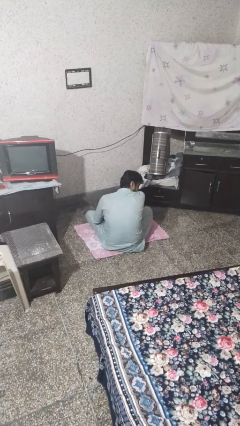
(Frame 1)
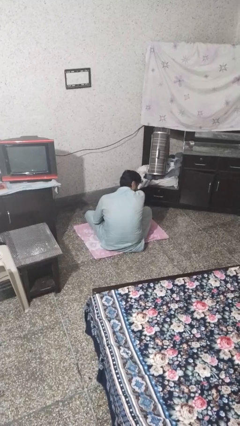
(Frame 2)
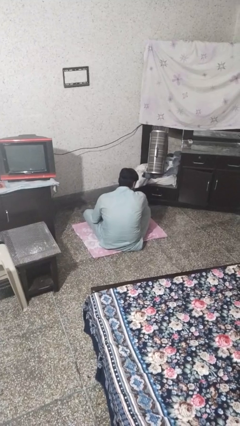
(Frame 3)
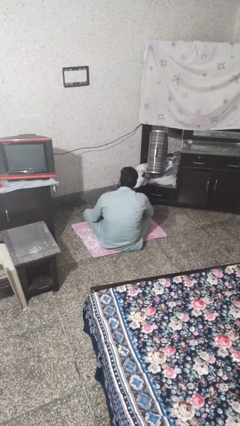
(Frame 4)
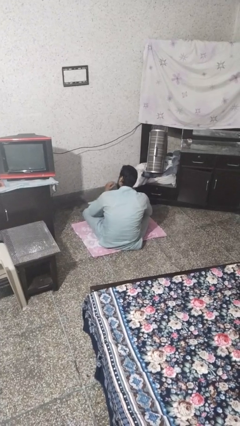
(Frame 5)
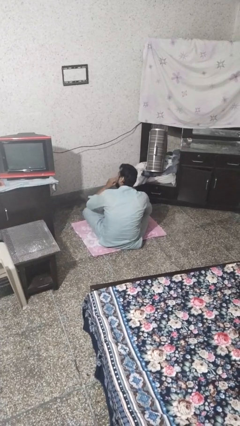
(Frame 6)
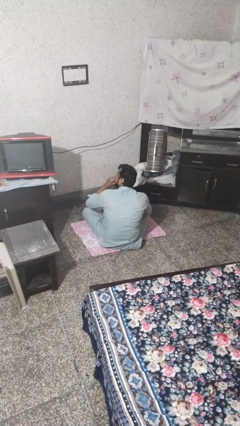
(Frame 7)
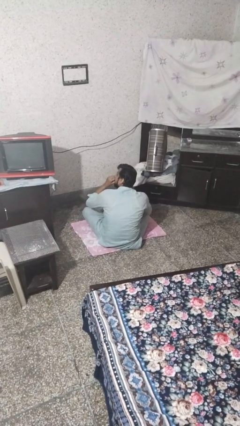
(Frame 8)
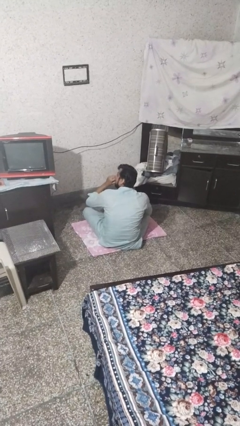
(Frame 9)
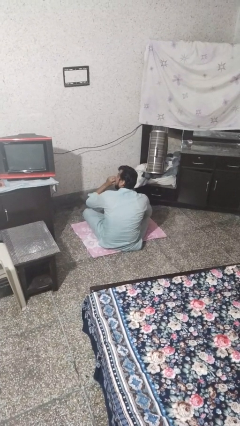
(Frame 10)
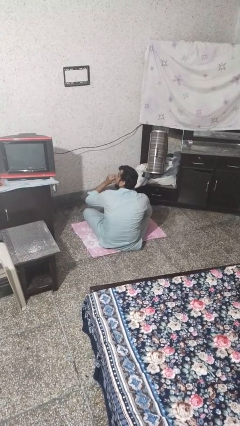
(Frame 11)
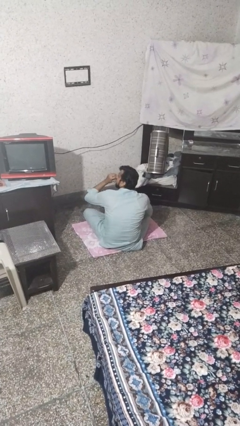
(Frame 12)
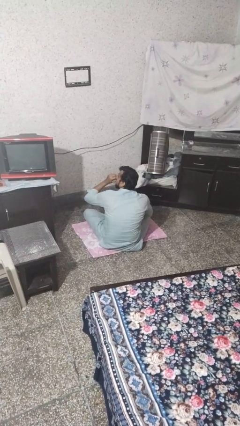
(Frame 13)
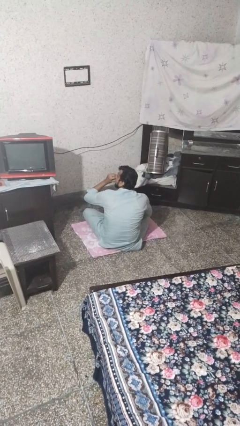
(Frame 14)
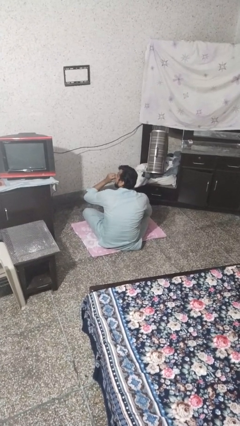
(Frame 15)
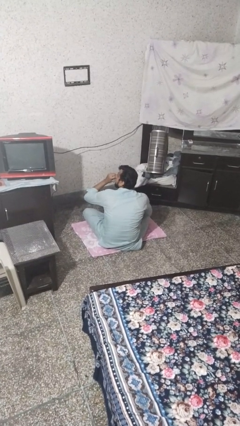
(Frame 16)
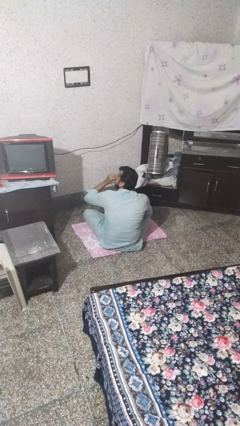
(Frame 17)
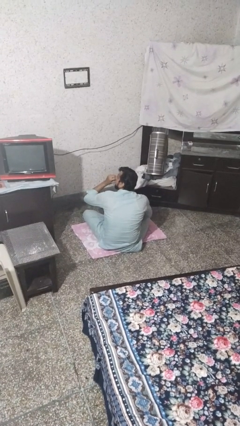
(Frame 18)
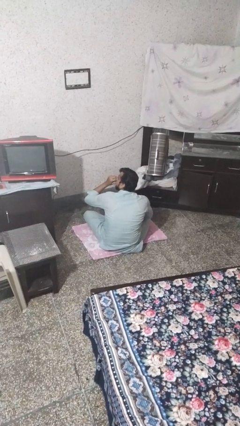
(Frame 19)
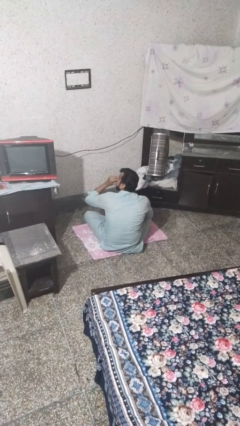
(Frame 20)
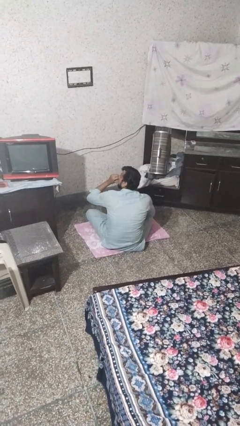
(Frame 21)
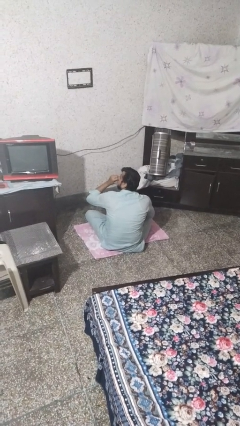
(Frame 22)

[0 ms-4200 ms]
person vapes

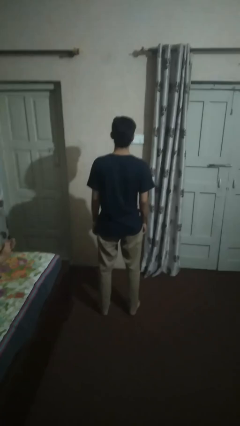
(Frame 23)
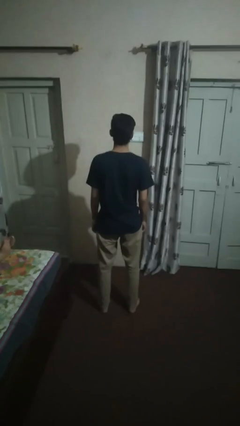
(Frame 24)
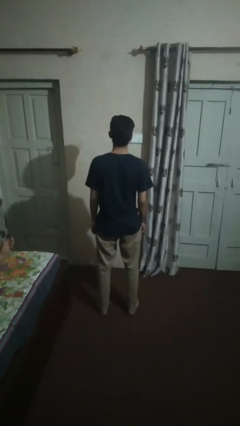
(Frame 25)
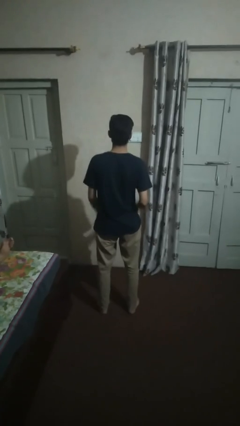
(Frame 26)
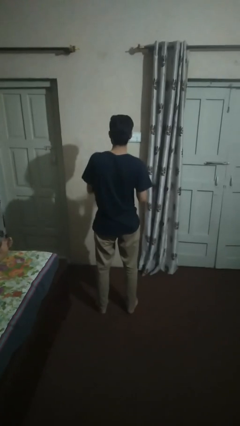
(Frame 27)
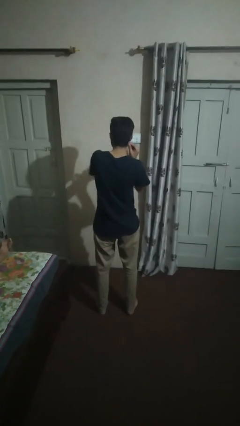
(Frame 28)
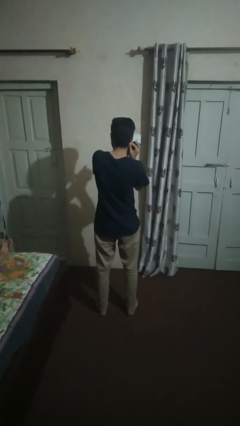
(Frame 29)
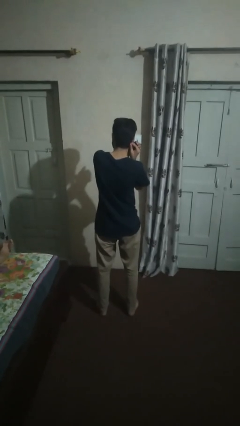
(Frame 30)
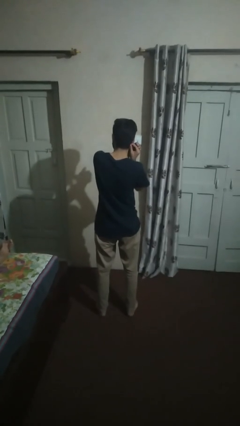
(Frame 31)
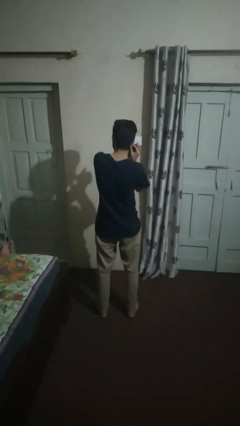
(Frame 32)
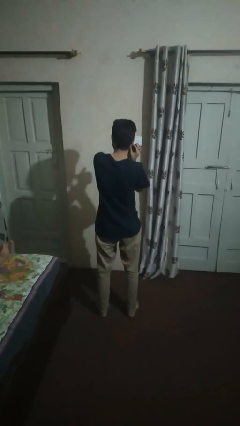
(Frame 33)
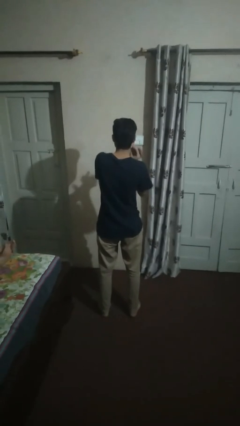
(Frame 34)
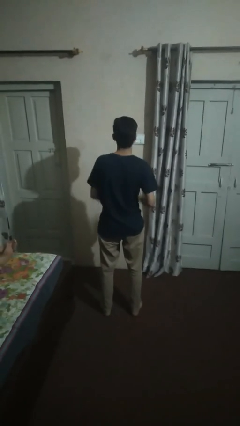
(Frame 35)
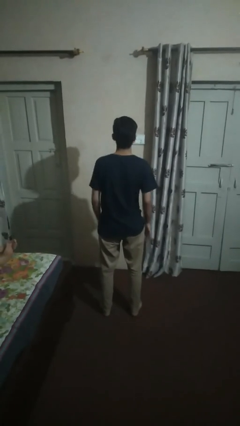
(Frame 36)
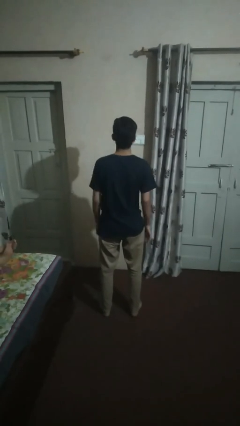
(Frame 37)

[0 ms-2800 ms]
person puts on earrings

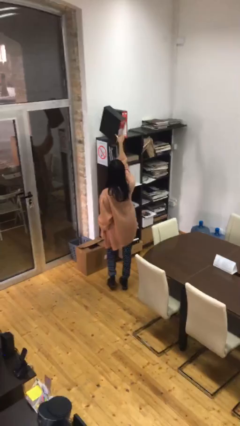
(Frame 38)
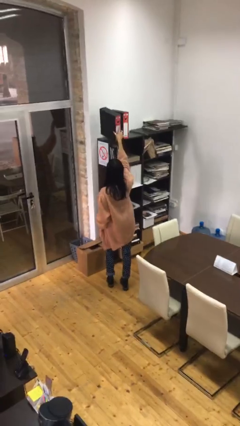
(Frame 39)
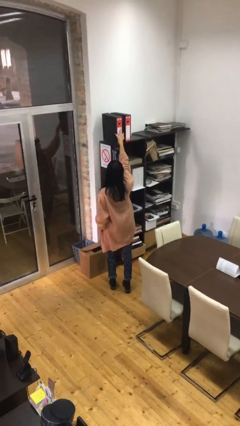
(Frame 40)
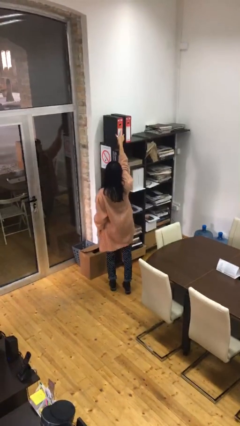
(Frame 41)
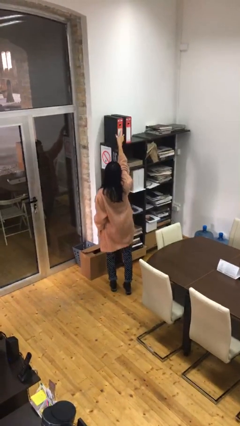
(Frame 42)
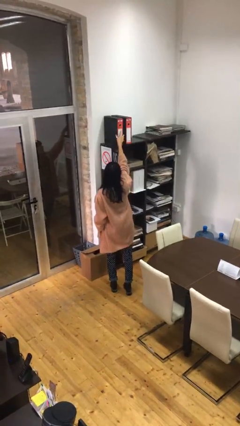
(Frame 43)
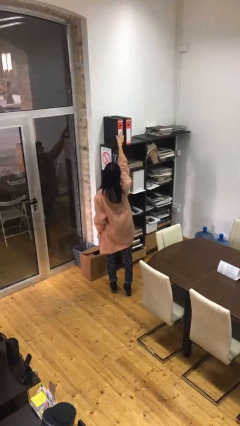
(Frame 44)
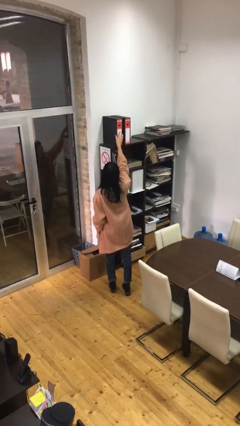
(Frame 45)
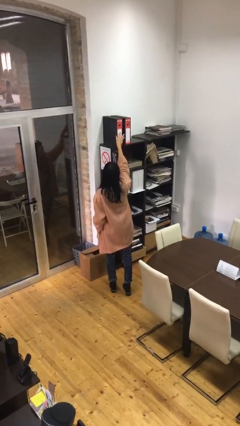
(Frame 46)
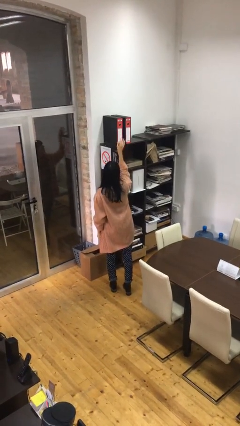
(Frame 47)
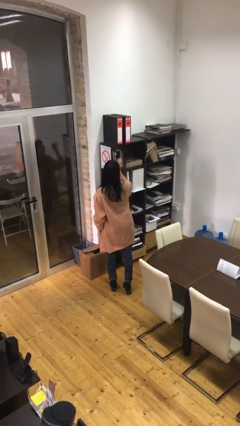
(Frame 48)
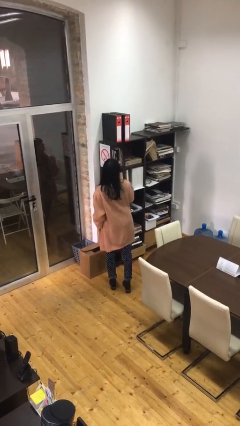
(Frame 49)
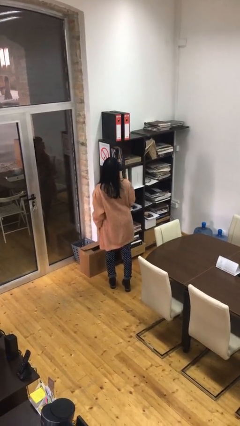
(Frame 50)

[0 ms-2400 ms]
person puts down object on shelf

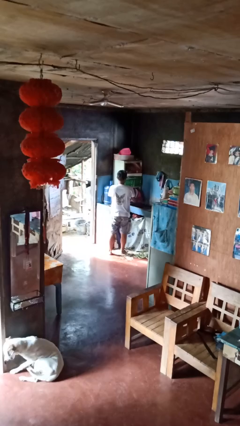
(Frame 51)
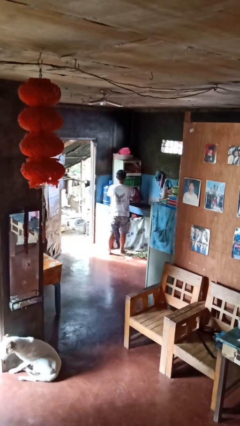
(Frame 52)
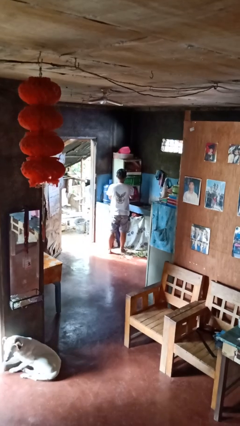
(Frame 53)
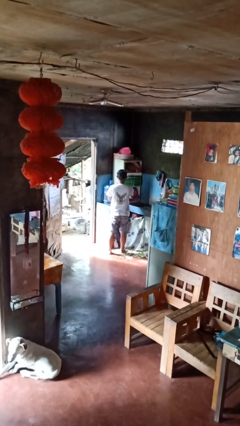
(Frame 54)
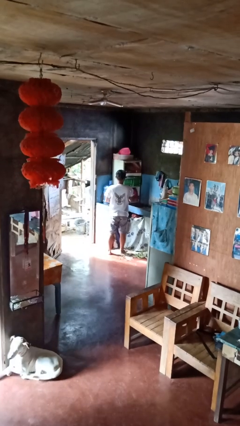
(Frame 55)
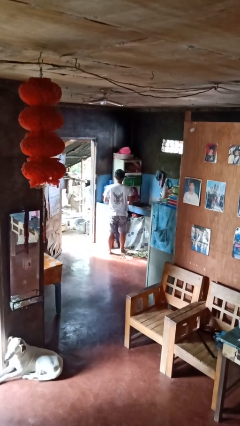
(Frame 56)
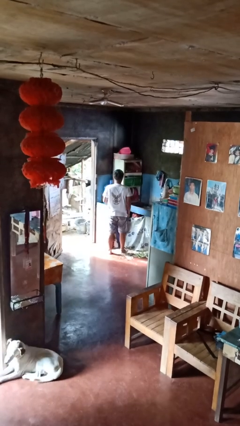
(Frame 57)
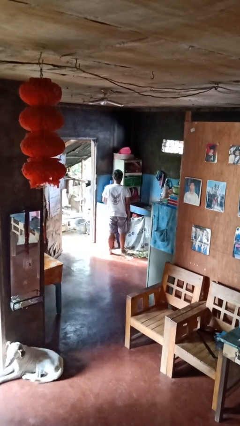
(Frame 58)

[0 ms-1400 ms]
person closes dishwasher

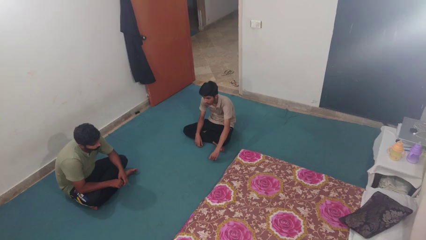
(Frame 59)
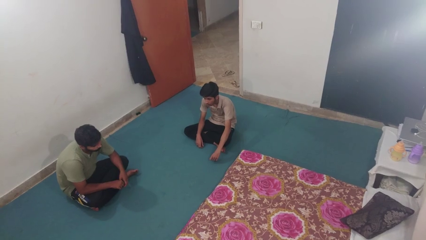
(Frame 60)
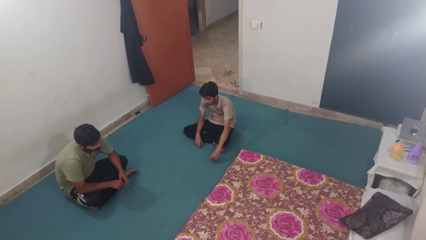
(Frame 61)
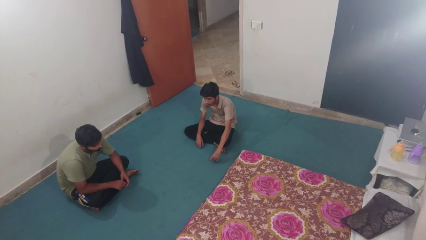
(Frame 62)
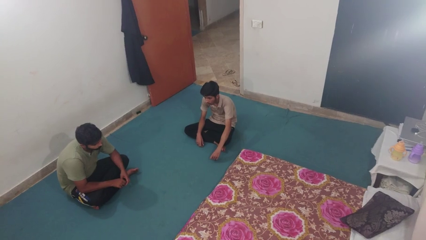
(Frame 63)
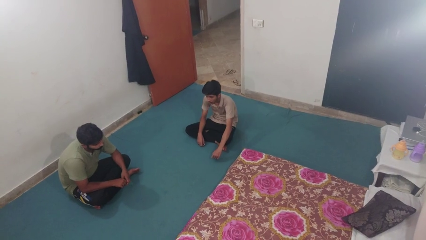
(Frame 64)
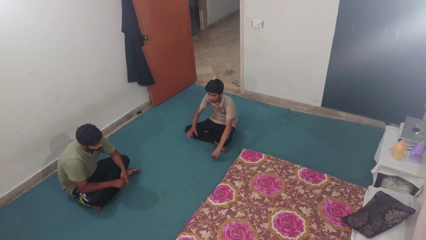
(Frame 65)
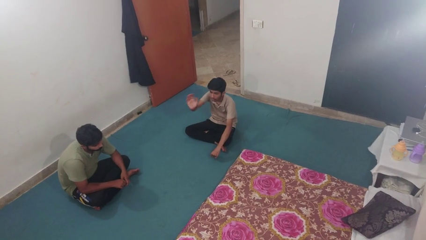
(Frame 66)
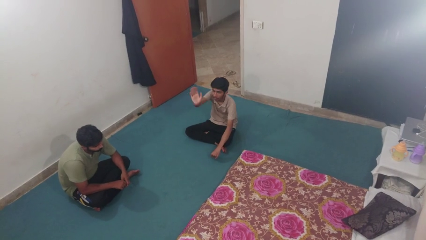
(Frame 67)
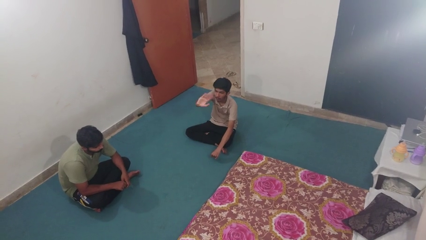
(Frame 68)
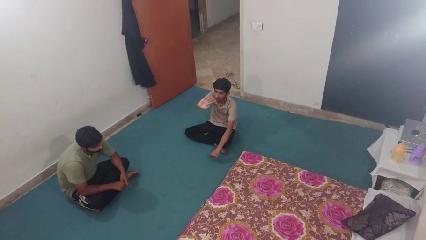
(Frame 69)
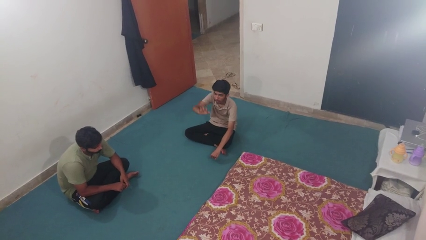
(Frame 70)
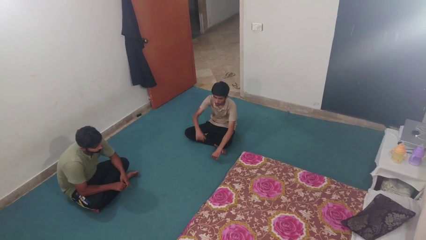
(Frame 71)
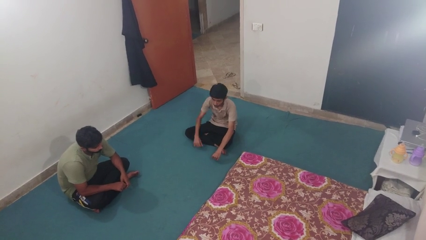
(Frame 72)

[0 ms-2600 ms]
person waves at person

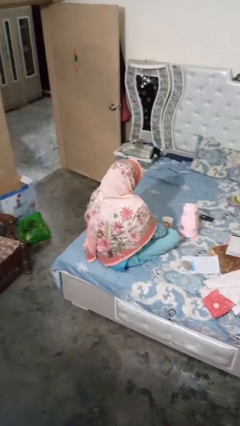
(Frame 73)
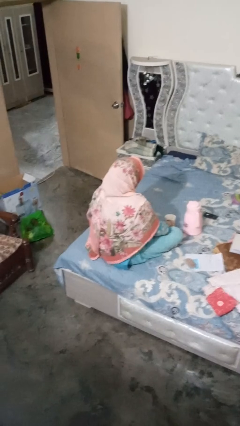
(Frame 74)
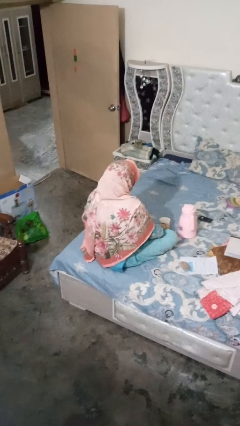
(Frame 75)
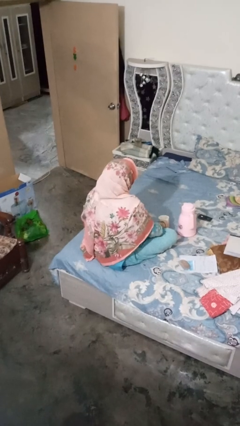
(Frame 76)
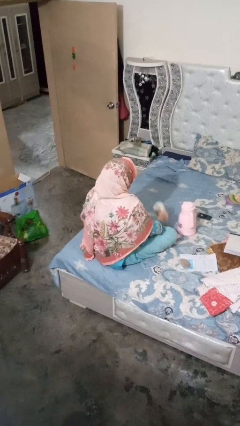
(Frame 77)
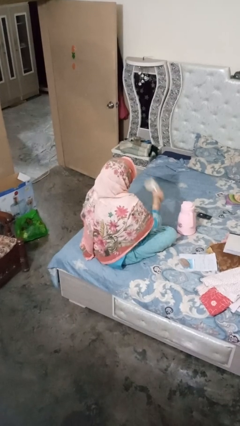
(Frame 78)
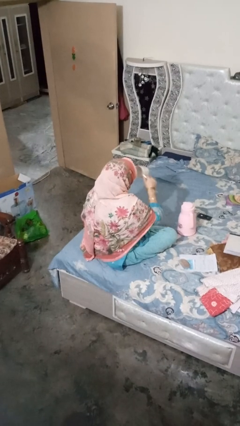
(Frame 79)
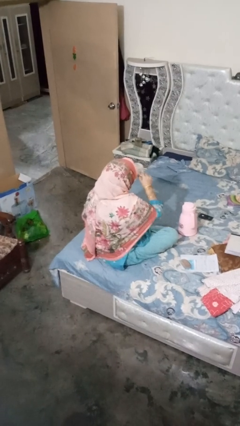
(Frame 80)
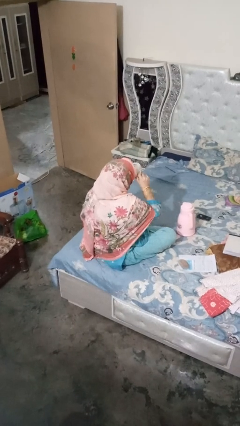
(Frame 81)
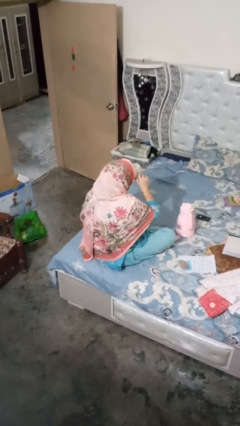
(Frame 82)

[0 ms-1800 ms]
person pours coffee into mug

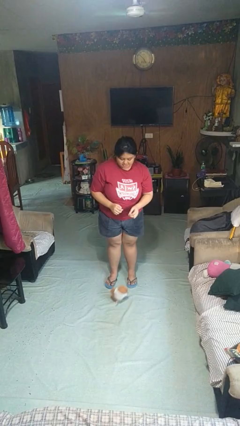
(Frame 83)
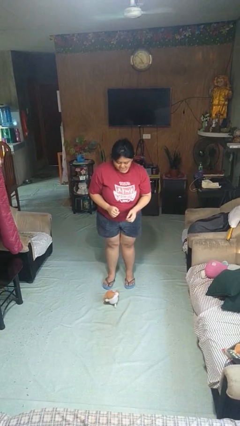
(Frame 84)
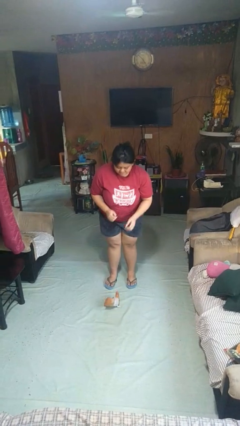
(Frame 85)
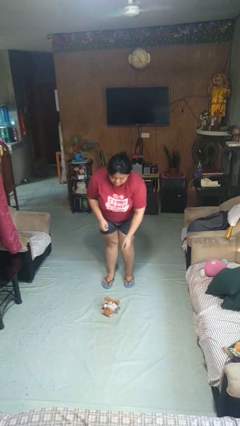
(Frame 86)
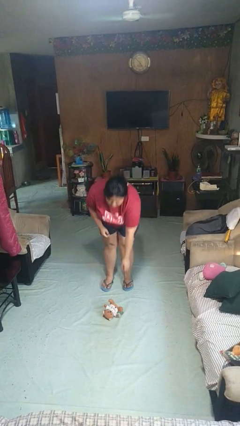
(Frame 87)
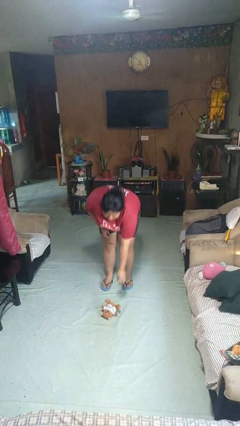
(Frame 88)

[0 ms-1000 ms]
person picks up object from floor

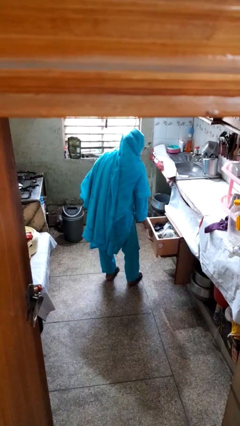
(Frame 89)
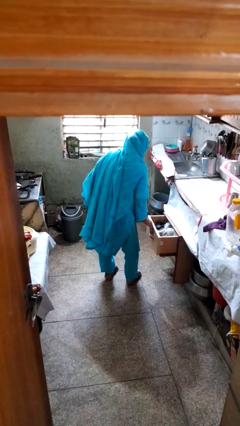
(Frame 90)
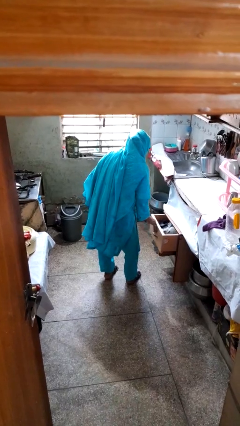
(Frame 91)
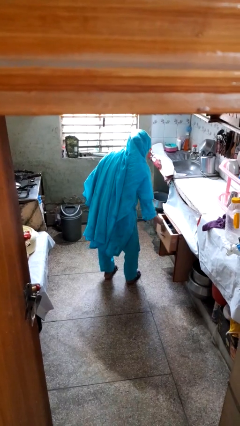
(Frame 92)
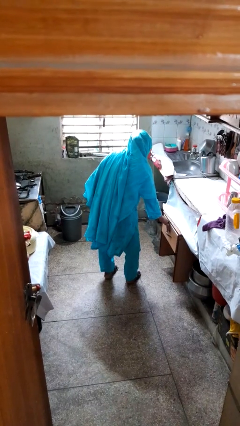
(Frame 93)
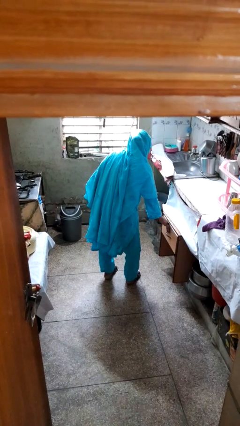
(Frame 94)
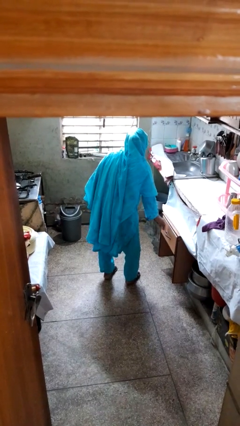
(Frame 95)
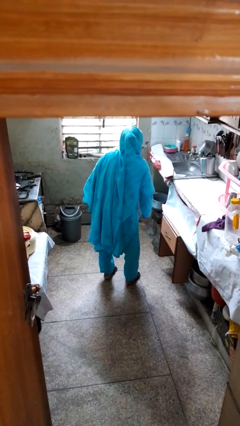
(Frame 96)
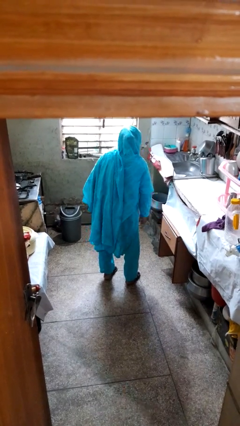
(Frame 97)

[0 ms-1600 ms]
person closes kitchen drawer
